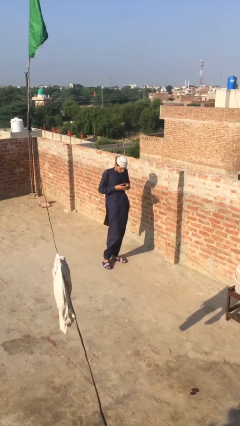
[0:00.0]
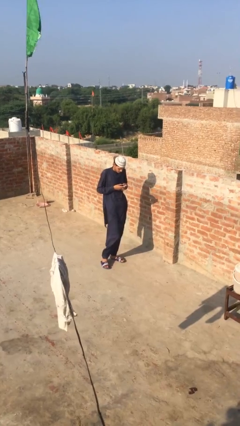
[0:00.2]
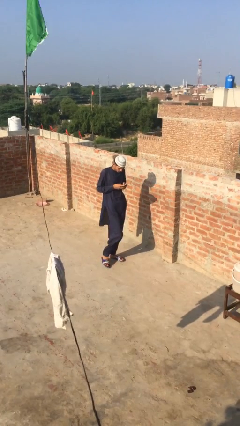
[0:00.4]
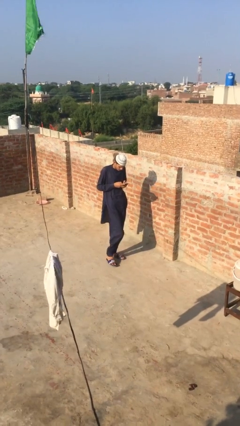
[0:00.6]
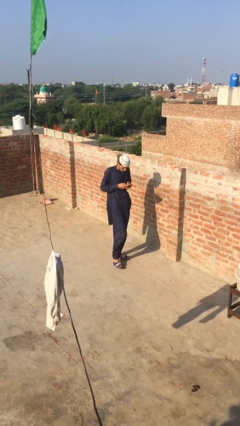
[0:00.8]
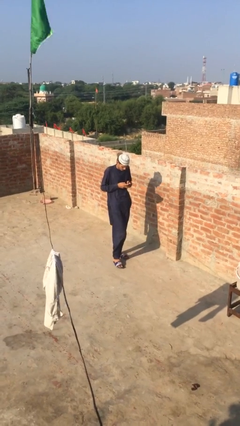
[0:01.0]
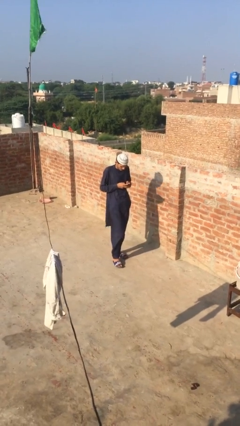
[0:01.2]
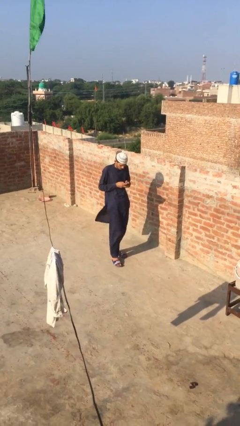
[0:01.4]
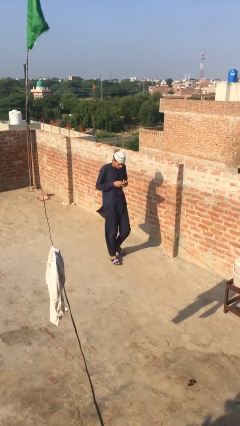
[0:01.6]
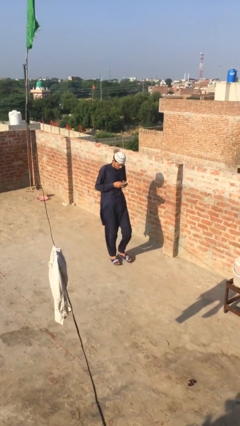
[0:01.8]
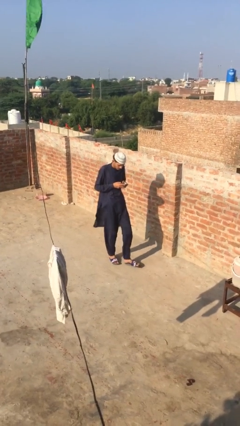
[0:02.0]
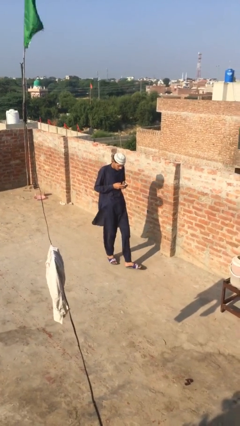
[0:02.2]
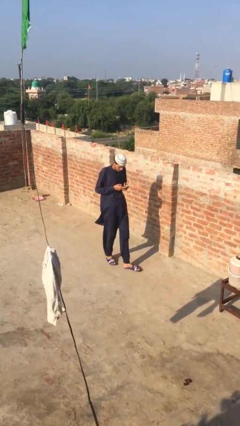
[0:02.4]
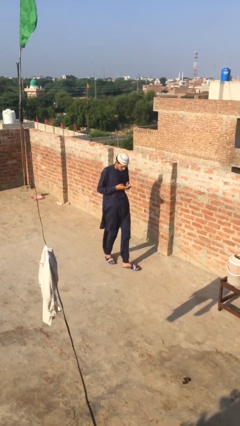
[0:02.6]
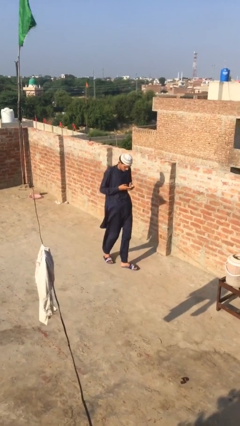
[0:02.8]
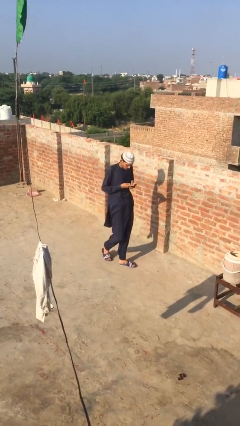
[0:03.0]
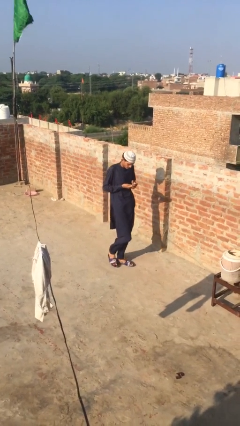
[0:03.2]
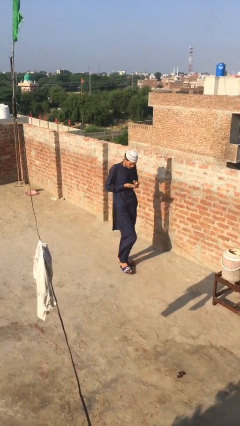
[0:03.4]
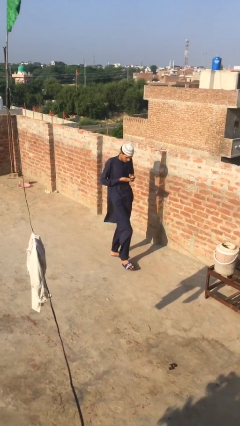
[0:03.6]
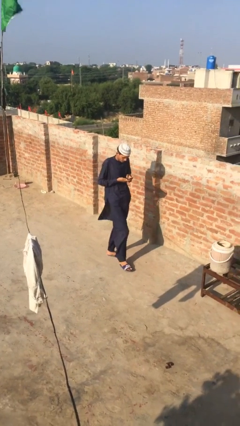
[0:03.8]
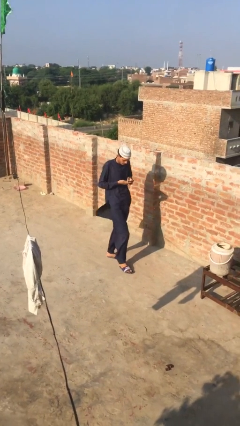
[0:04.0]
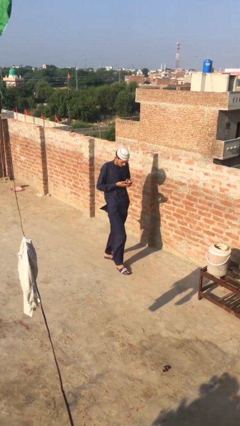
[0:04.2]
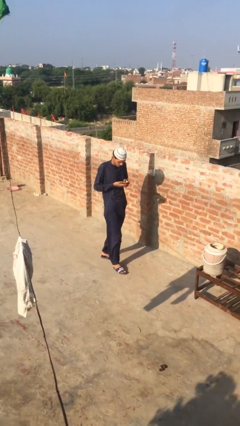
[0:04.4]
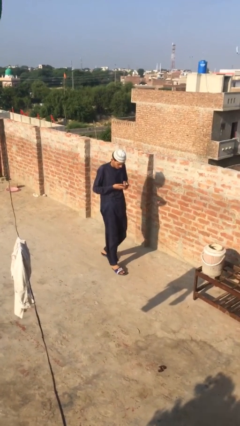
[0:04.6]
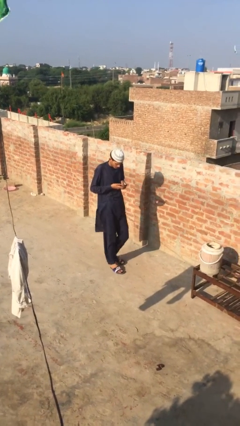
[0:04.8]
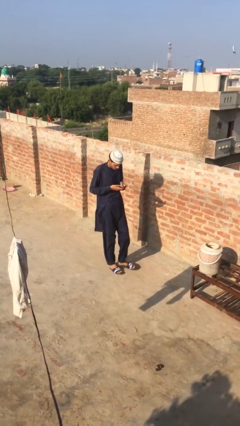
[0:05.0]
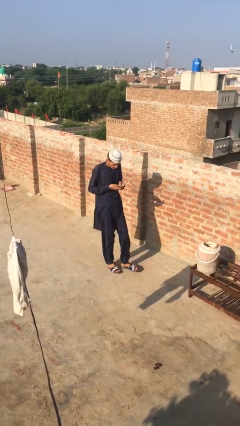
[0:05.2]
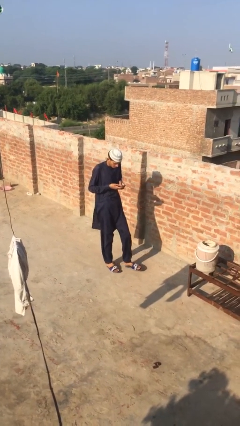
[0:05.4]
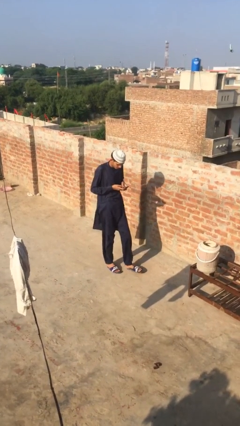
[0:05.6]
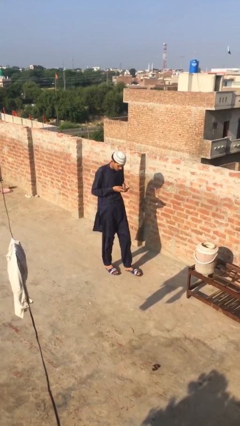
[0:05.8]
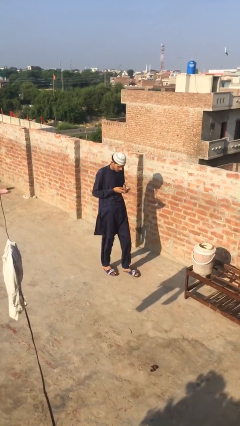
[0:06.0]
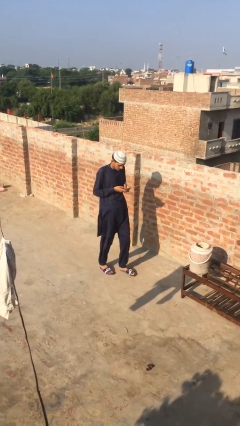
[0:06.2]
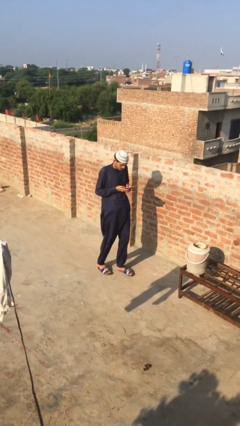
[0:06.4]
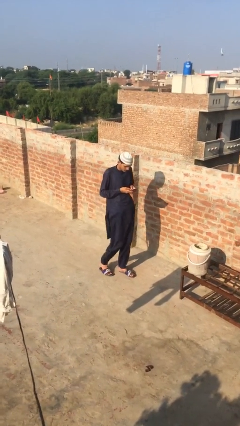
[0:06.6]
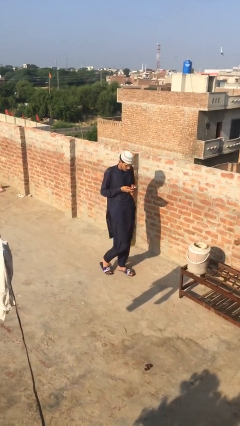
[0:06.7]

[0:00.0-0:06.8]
person texts on phone

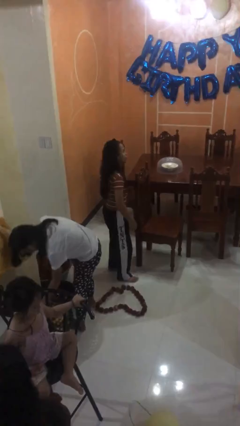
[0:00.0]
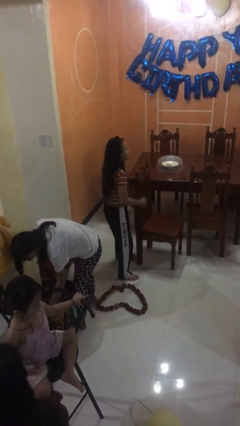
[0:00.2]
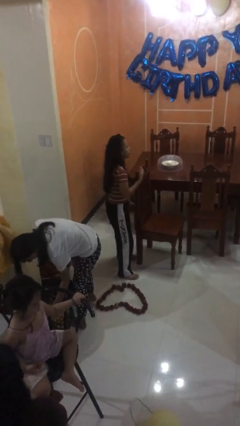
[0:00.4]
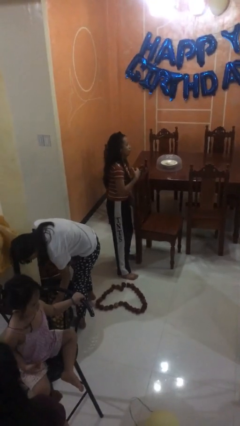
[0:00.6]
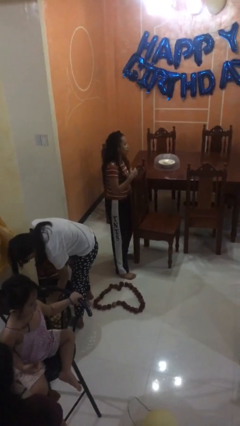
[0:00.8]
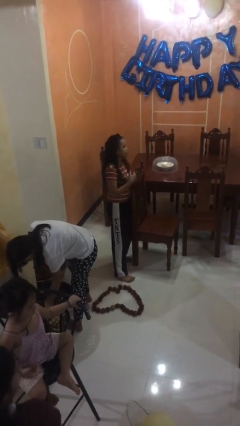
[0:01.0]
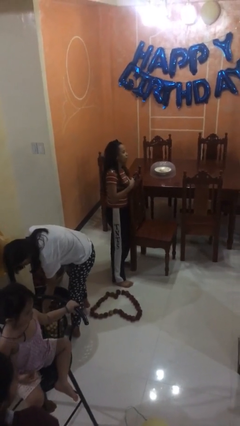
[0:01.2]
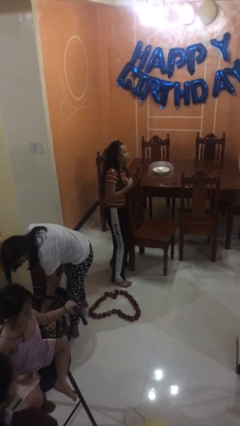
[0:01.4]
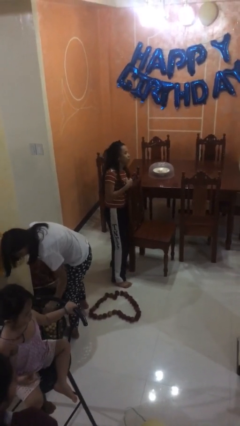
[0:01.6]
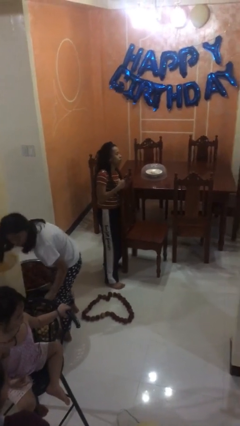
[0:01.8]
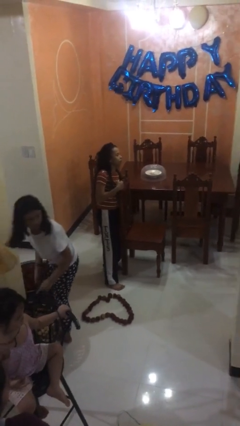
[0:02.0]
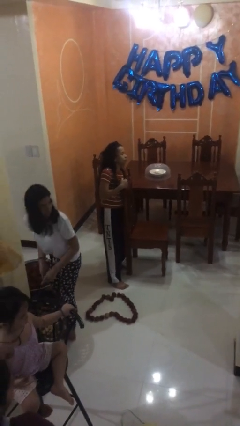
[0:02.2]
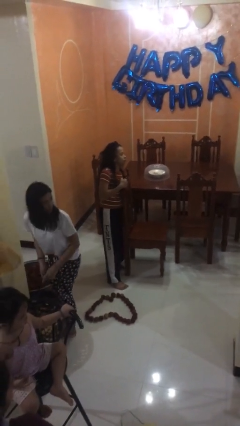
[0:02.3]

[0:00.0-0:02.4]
person picks up object from floor

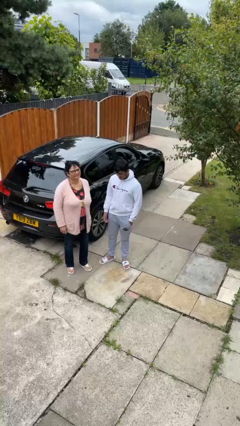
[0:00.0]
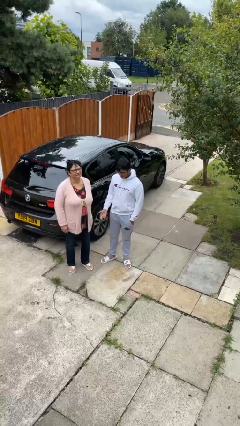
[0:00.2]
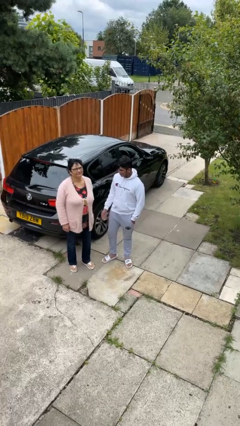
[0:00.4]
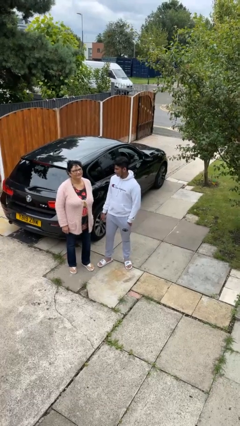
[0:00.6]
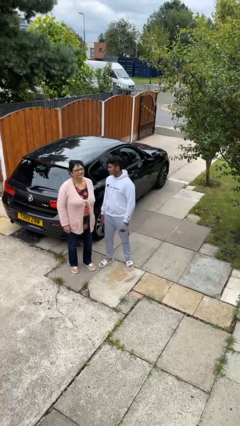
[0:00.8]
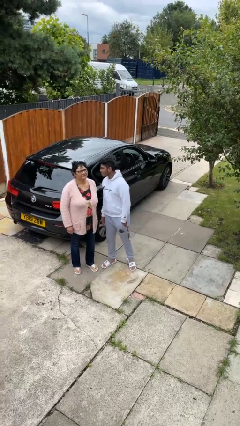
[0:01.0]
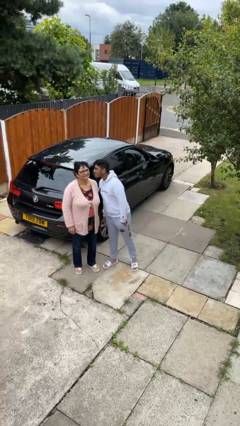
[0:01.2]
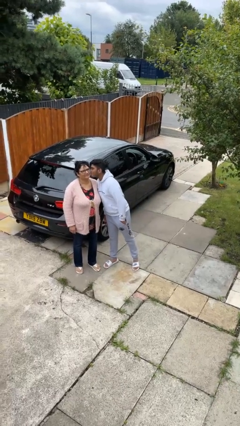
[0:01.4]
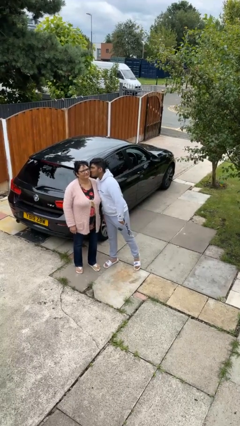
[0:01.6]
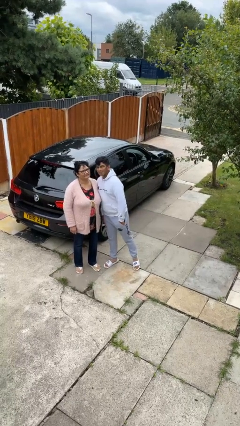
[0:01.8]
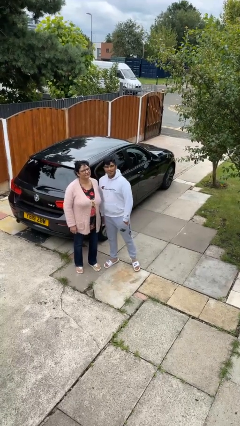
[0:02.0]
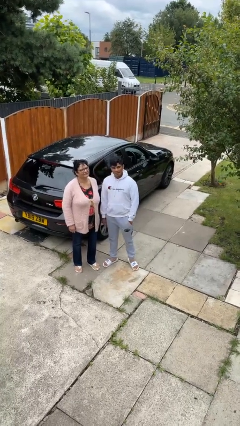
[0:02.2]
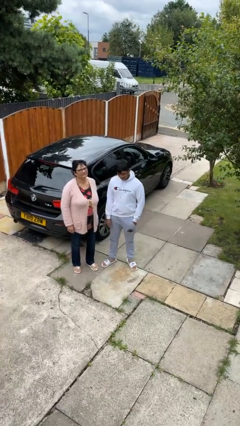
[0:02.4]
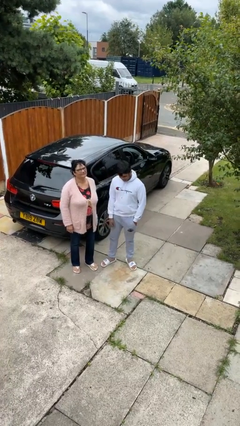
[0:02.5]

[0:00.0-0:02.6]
person kisses cheek of person

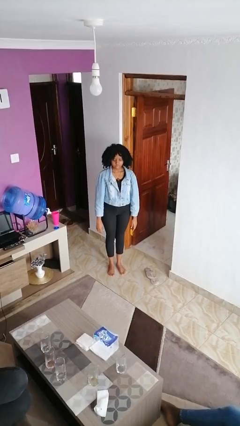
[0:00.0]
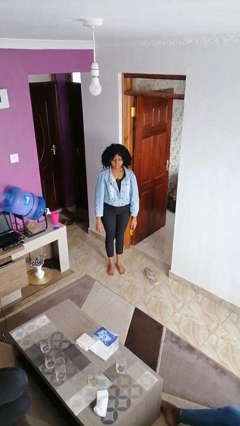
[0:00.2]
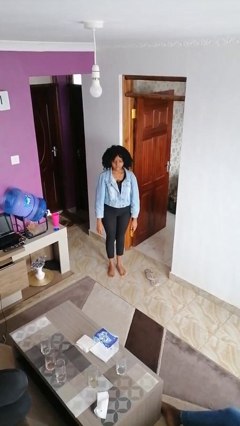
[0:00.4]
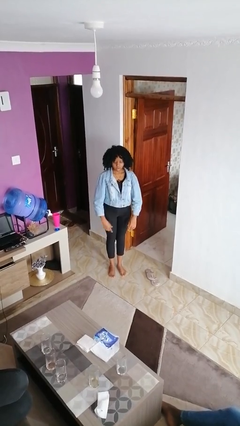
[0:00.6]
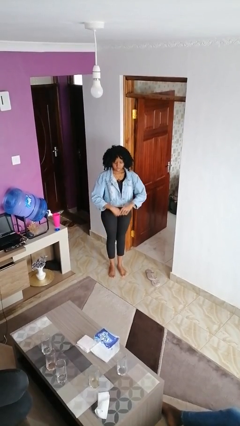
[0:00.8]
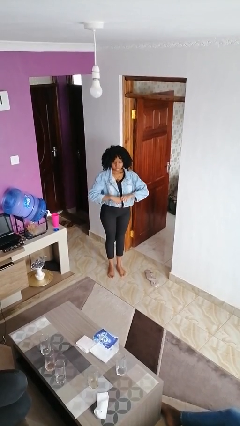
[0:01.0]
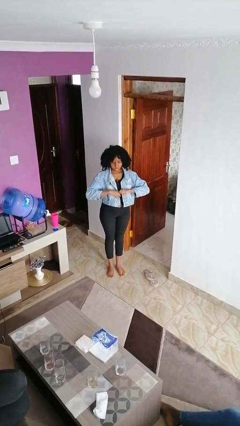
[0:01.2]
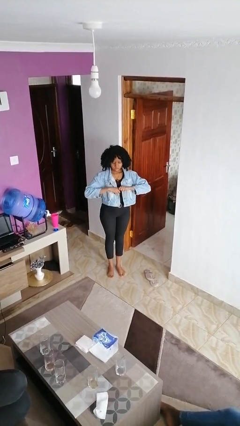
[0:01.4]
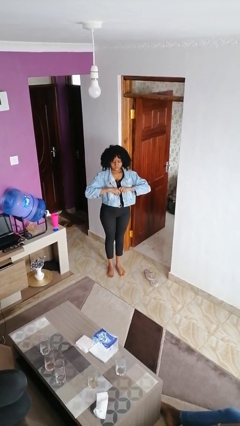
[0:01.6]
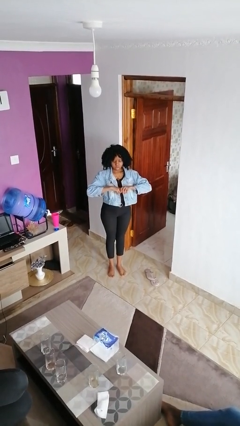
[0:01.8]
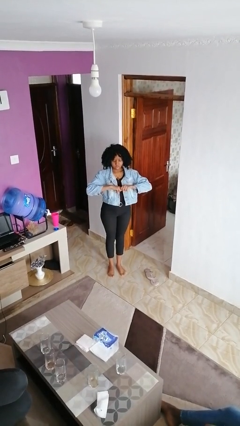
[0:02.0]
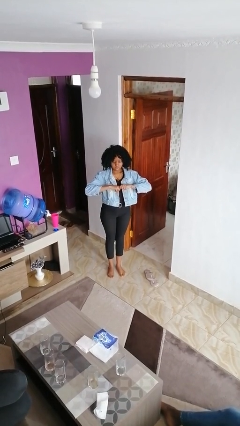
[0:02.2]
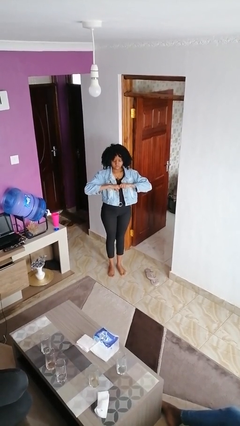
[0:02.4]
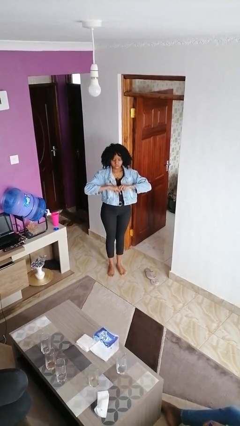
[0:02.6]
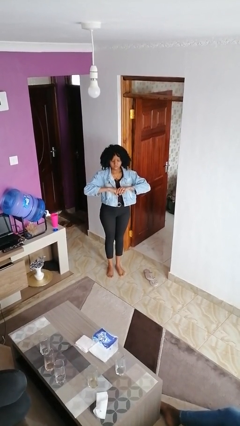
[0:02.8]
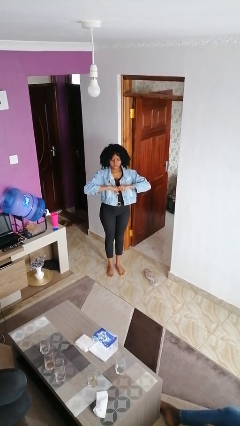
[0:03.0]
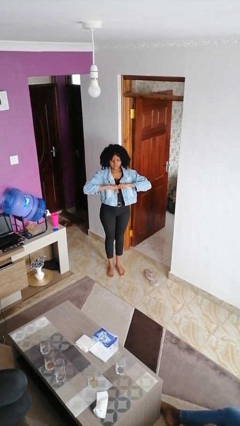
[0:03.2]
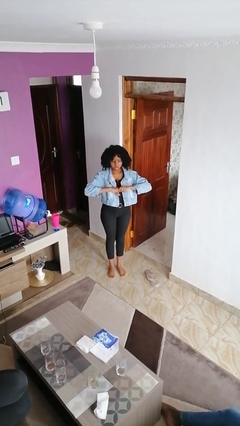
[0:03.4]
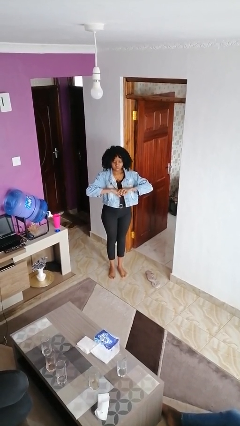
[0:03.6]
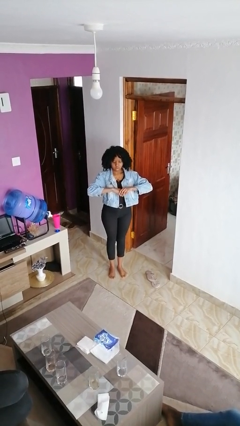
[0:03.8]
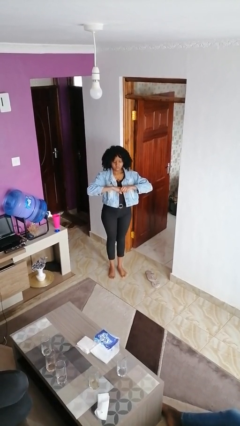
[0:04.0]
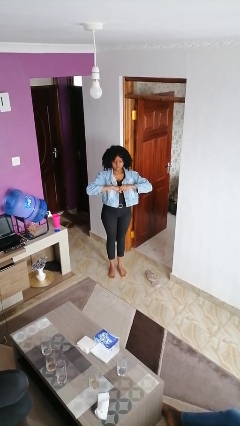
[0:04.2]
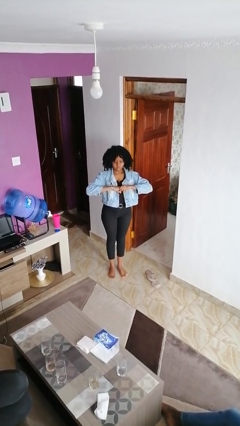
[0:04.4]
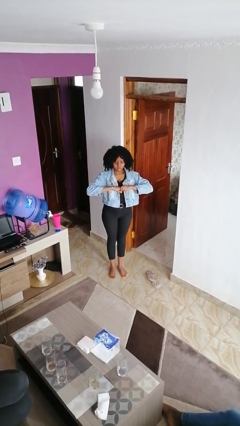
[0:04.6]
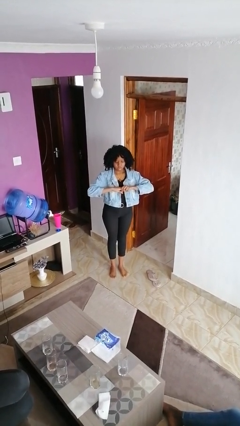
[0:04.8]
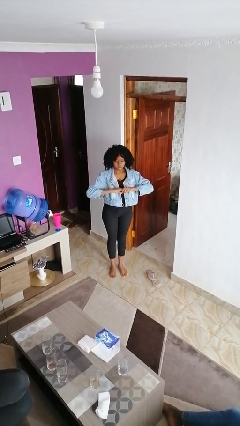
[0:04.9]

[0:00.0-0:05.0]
person cracks knuckles

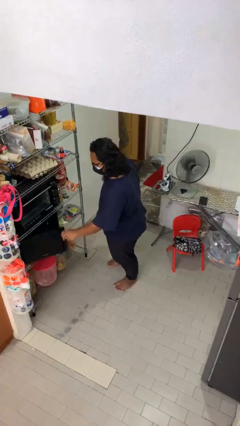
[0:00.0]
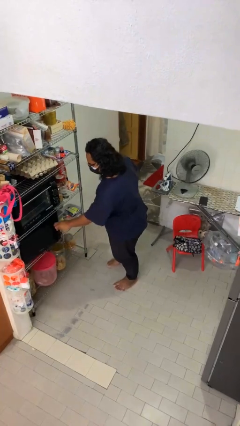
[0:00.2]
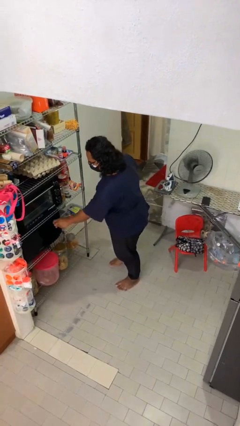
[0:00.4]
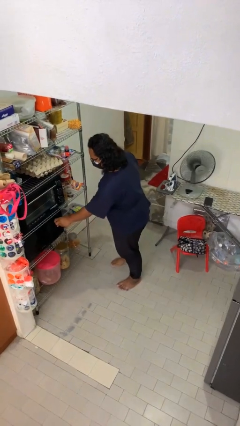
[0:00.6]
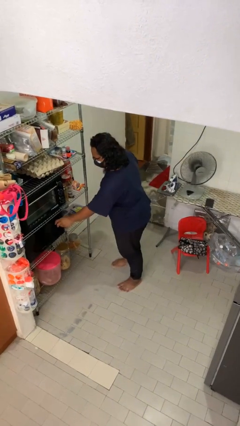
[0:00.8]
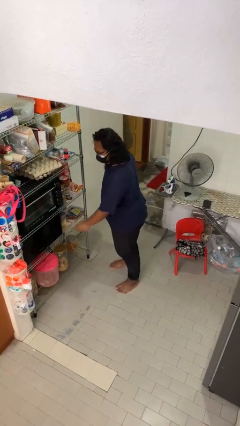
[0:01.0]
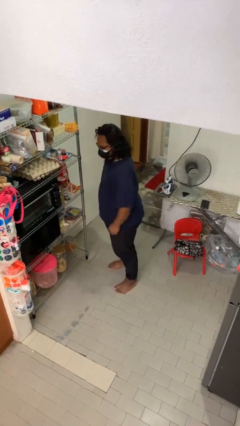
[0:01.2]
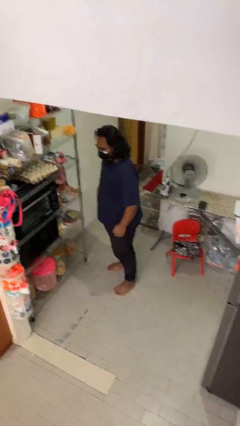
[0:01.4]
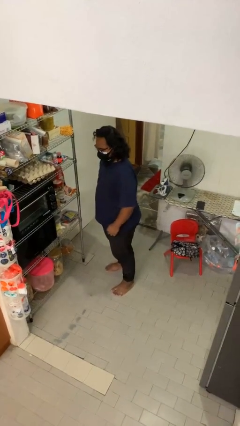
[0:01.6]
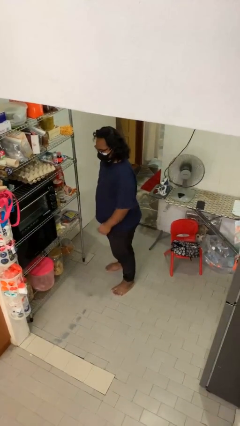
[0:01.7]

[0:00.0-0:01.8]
person closes microwave
